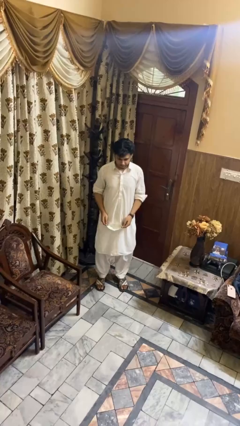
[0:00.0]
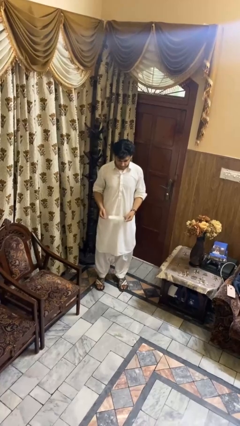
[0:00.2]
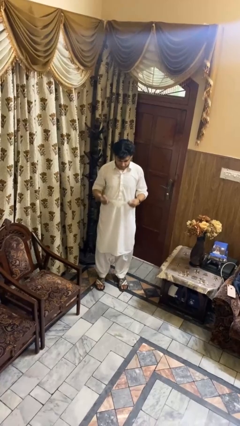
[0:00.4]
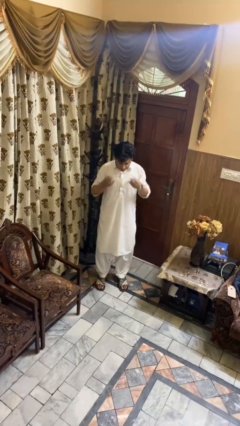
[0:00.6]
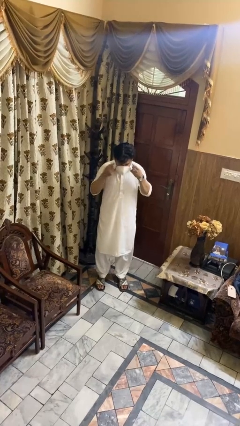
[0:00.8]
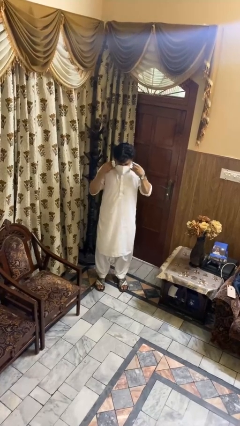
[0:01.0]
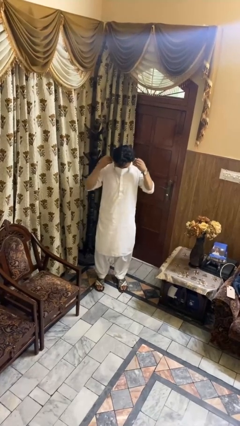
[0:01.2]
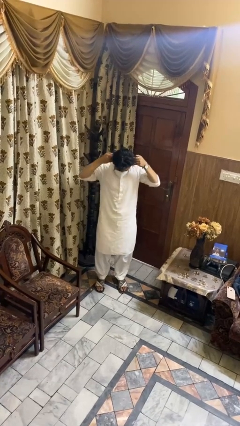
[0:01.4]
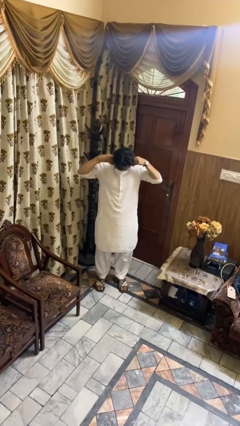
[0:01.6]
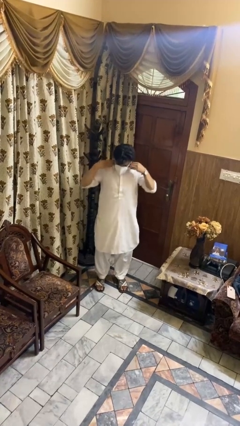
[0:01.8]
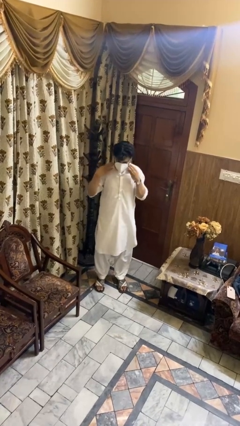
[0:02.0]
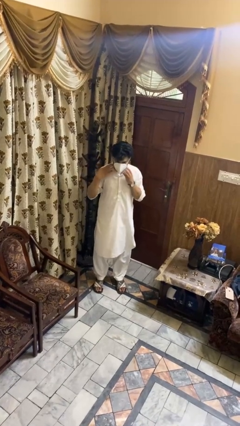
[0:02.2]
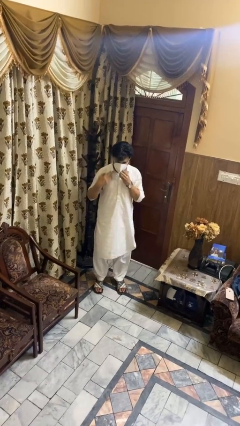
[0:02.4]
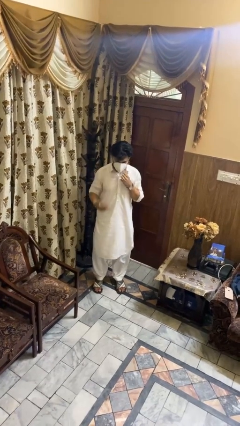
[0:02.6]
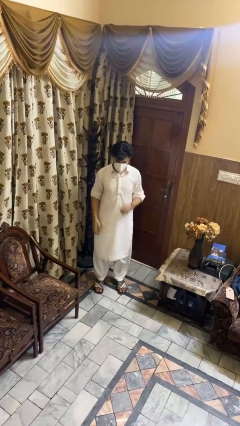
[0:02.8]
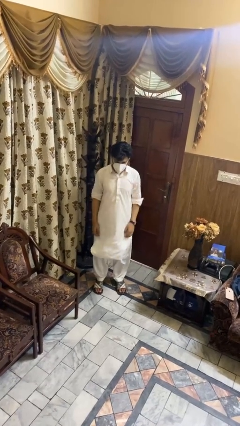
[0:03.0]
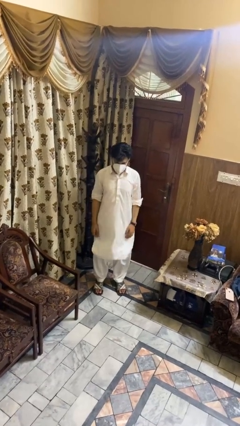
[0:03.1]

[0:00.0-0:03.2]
person puts on facemask

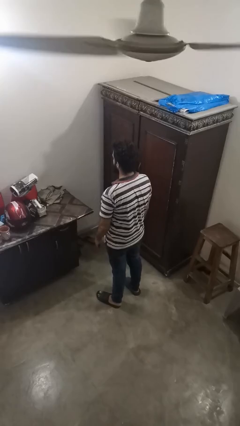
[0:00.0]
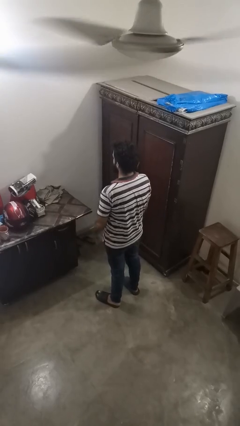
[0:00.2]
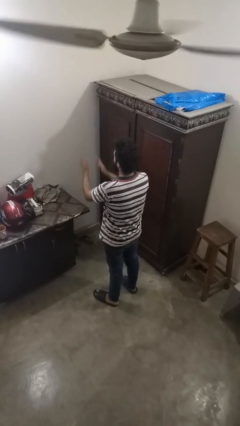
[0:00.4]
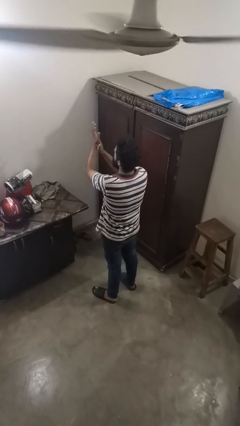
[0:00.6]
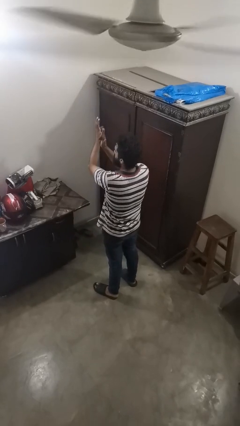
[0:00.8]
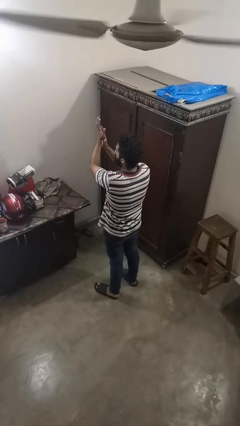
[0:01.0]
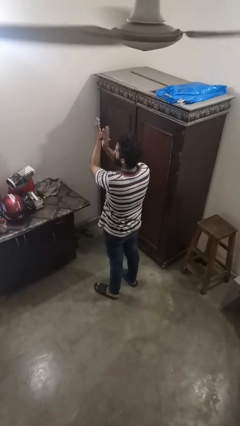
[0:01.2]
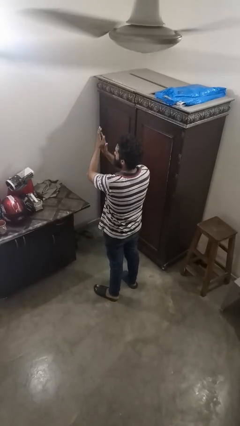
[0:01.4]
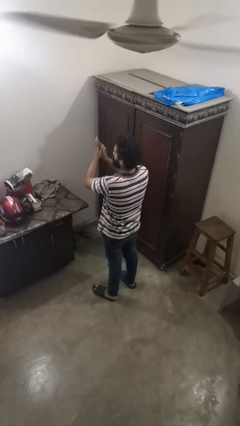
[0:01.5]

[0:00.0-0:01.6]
person claps hands

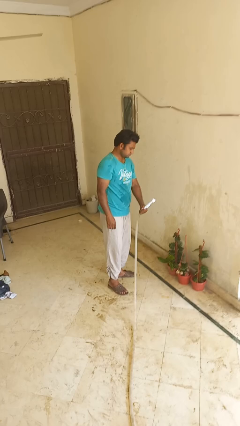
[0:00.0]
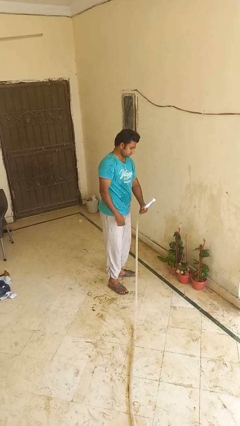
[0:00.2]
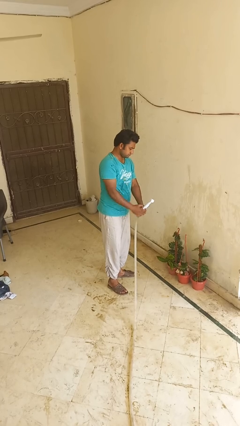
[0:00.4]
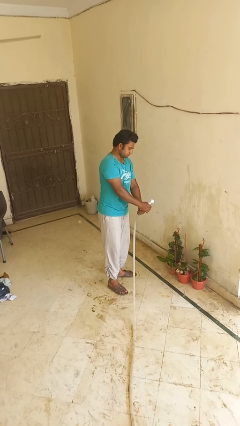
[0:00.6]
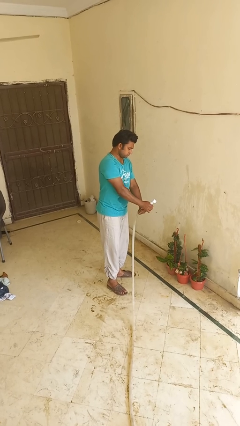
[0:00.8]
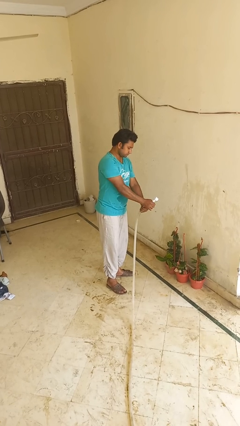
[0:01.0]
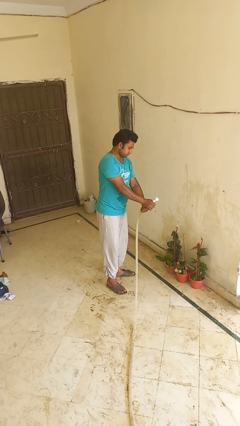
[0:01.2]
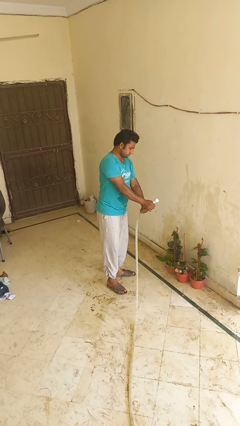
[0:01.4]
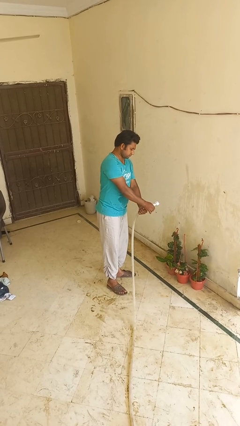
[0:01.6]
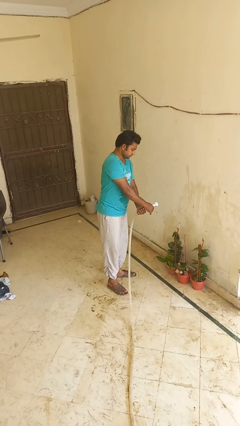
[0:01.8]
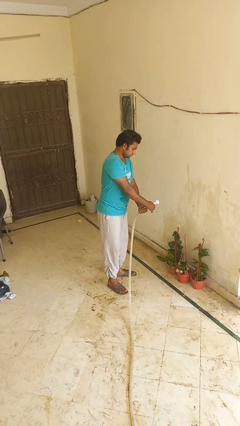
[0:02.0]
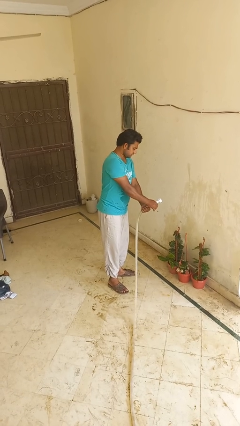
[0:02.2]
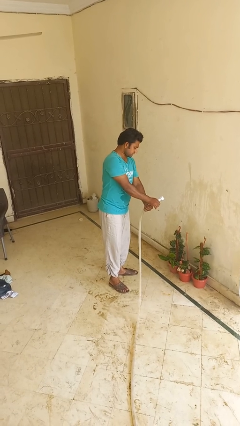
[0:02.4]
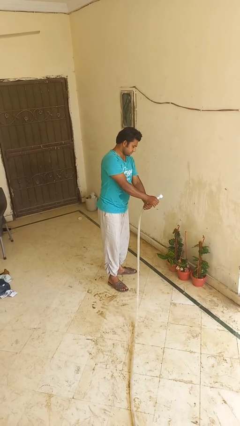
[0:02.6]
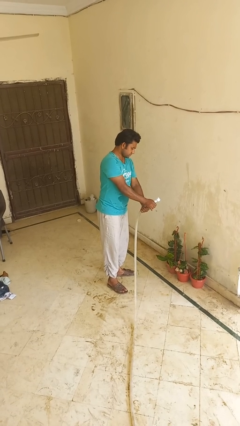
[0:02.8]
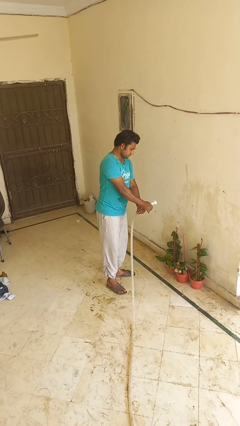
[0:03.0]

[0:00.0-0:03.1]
person waters houseplant

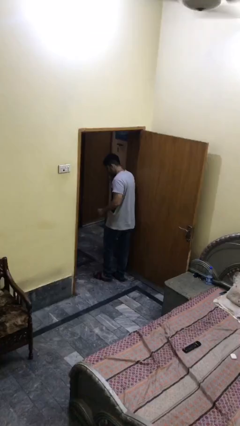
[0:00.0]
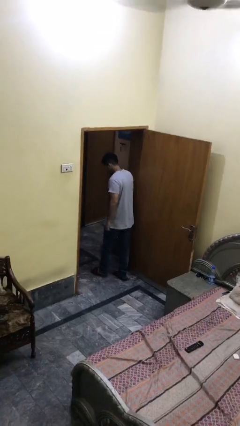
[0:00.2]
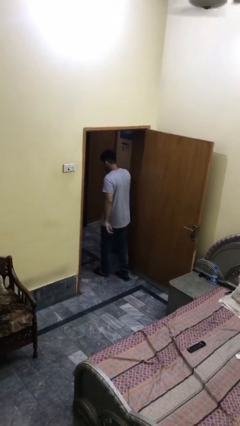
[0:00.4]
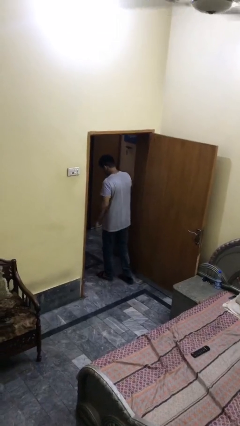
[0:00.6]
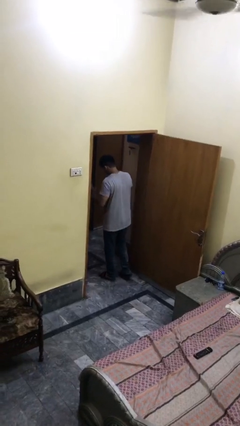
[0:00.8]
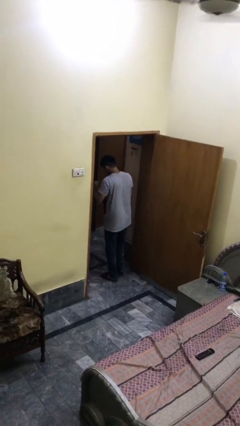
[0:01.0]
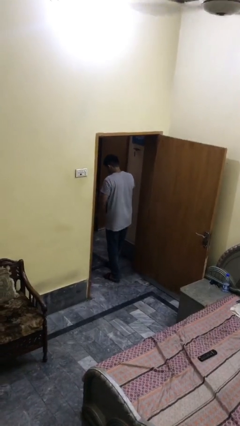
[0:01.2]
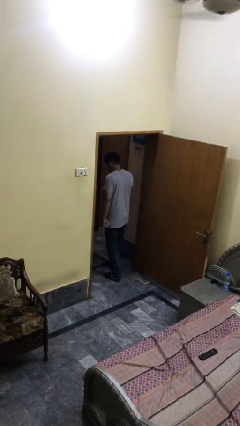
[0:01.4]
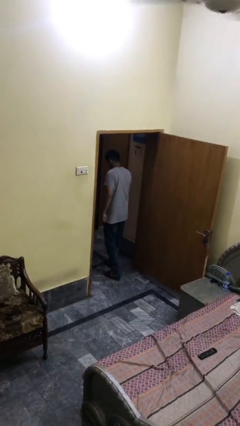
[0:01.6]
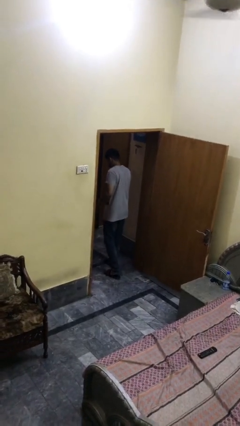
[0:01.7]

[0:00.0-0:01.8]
person exits scene through structure

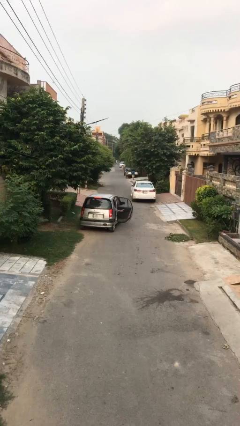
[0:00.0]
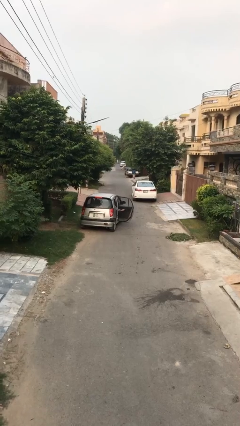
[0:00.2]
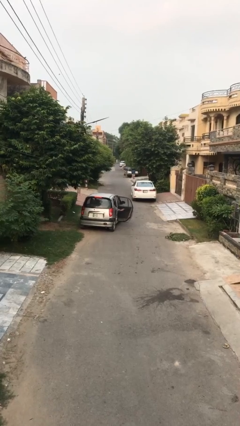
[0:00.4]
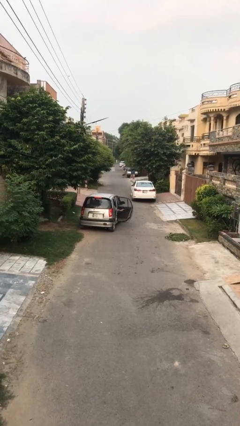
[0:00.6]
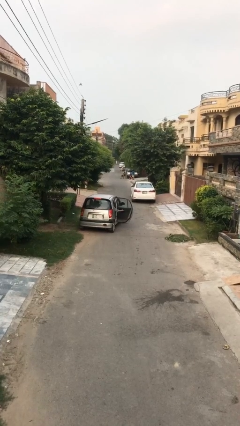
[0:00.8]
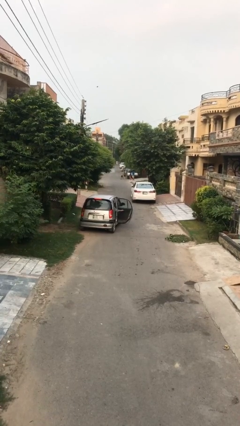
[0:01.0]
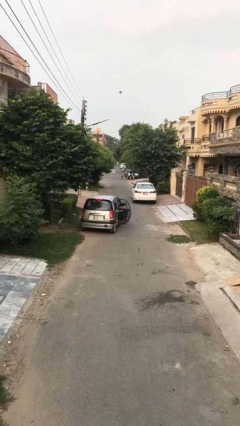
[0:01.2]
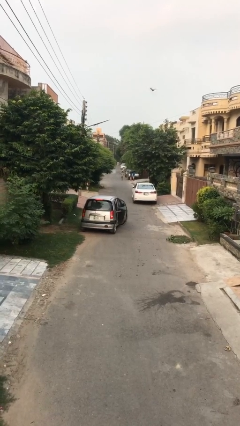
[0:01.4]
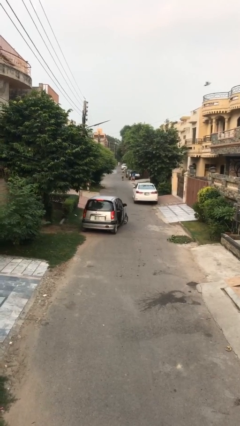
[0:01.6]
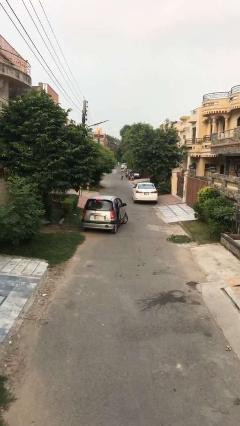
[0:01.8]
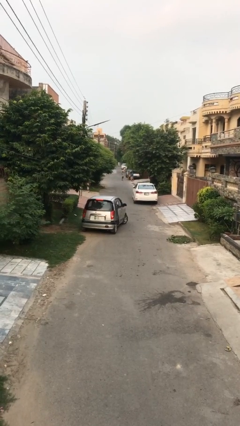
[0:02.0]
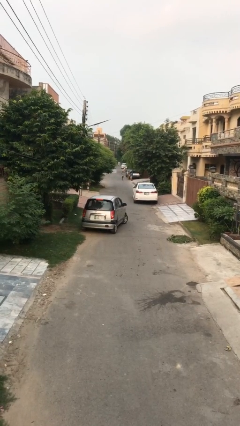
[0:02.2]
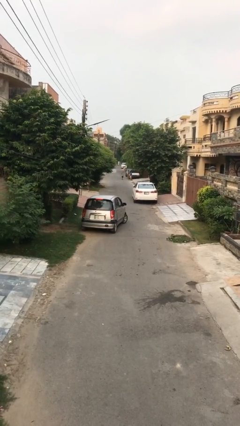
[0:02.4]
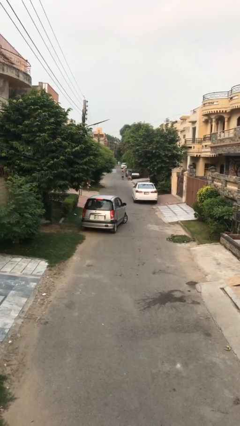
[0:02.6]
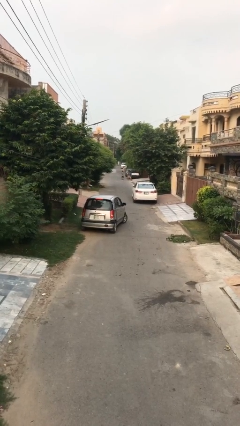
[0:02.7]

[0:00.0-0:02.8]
person closes car door

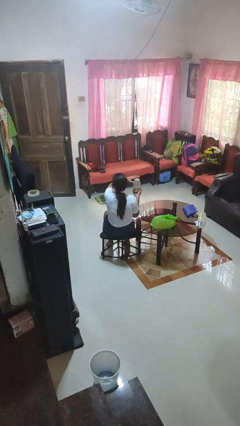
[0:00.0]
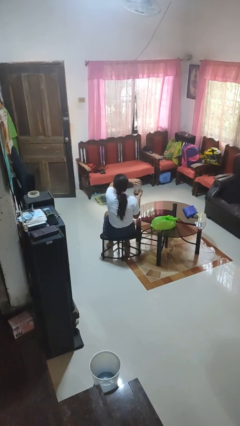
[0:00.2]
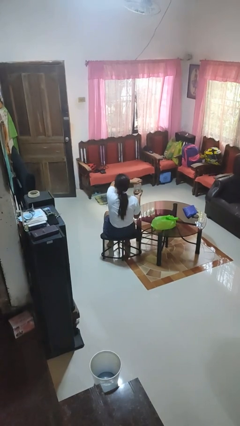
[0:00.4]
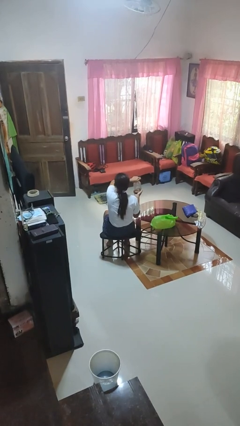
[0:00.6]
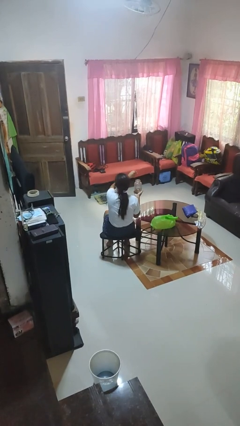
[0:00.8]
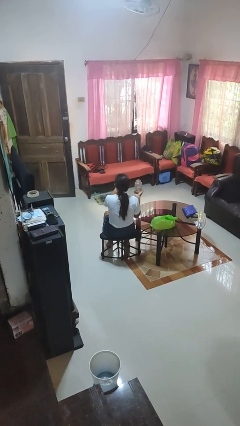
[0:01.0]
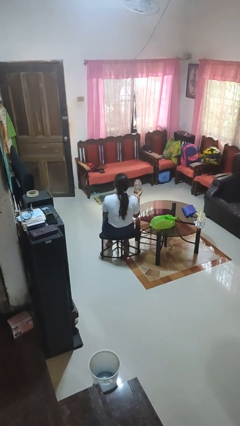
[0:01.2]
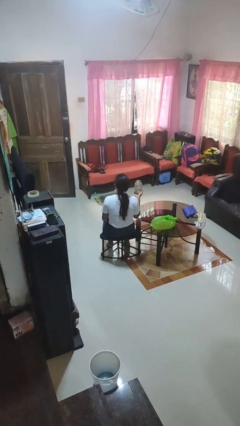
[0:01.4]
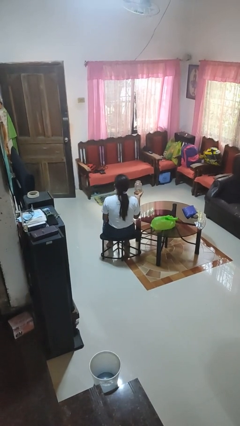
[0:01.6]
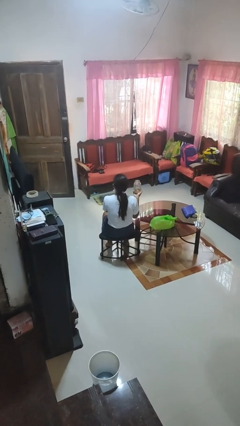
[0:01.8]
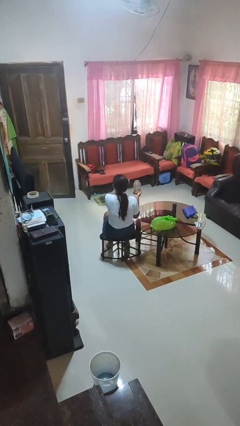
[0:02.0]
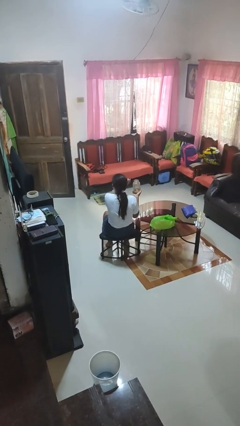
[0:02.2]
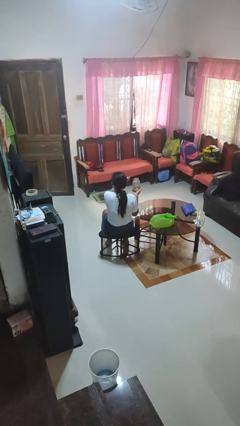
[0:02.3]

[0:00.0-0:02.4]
person opens jar

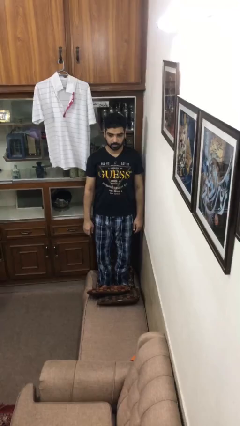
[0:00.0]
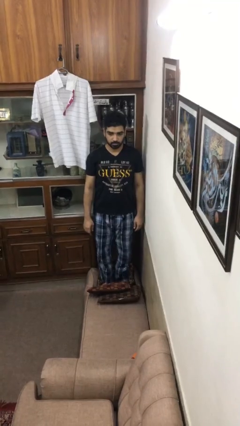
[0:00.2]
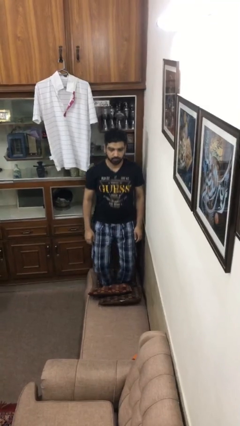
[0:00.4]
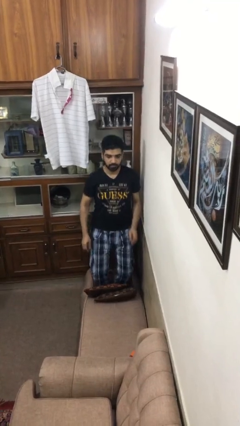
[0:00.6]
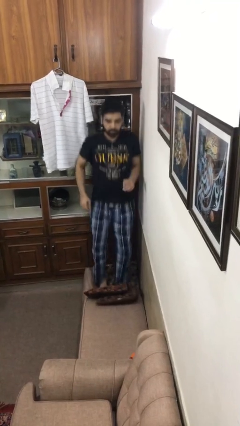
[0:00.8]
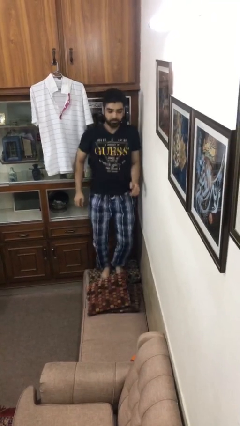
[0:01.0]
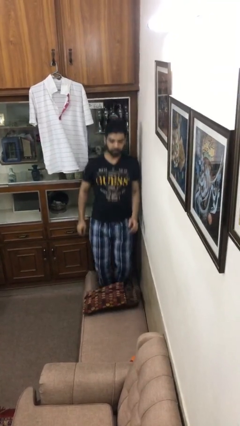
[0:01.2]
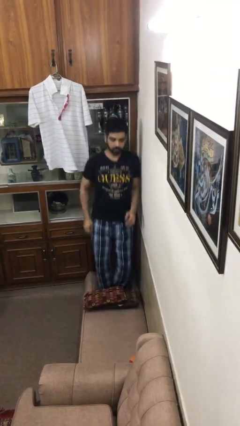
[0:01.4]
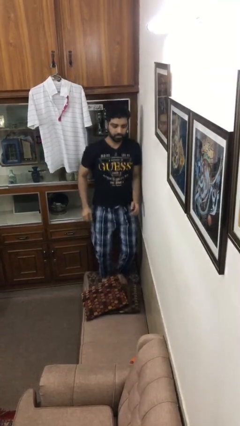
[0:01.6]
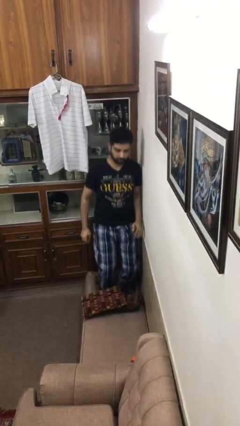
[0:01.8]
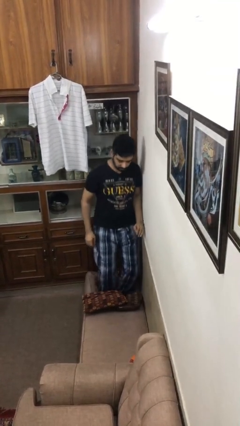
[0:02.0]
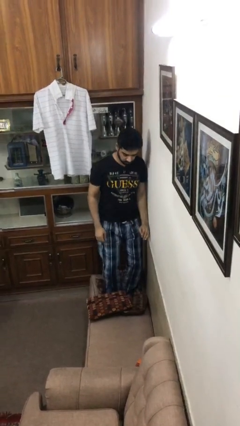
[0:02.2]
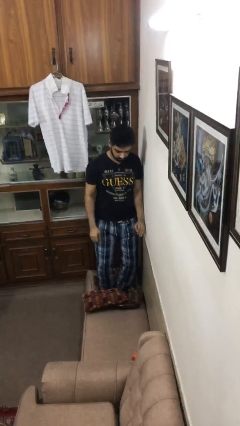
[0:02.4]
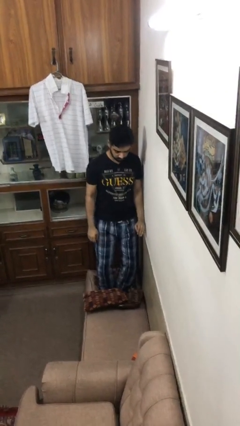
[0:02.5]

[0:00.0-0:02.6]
person jumps on couch
